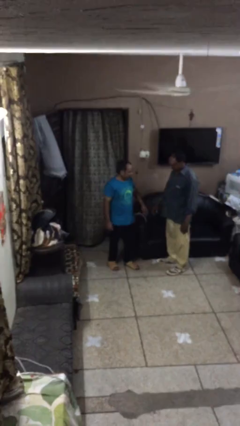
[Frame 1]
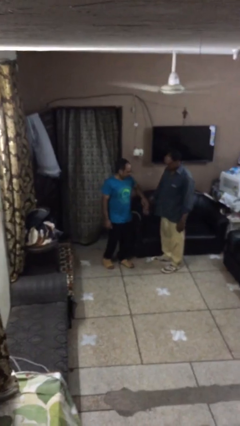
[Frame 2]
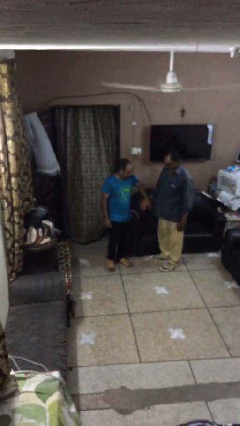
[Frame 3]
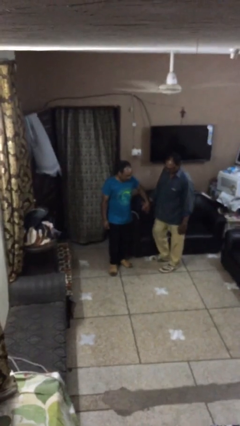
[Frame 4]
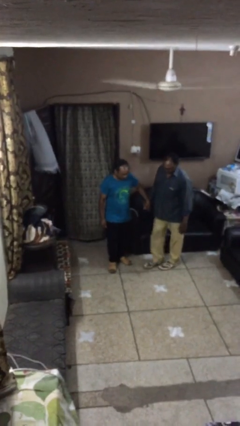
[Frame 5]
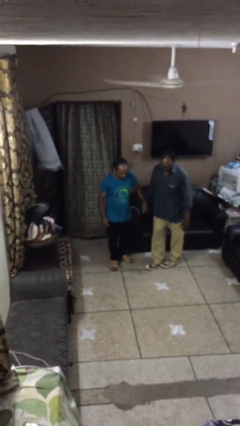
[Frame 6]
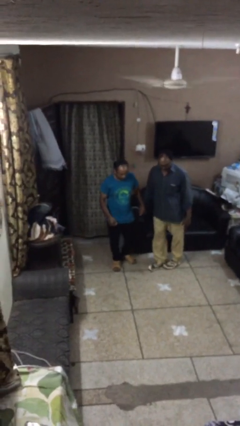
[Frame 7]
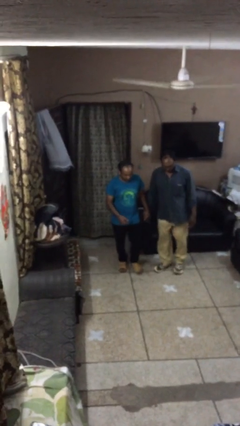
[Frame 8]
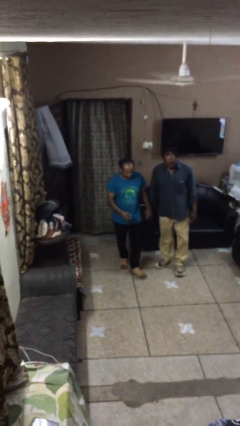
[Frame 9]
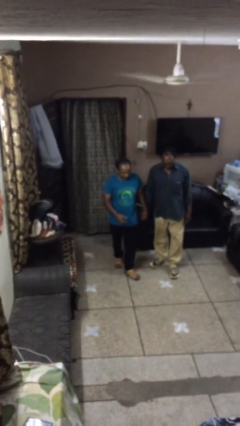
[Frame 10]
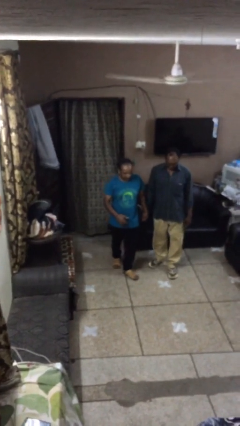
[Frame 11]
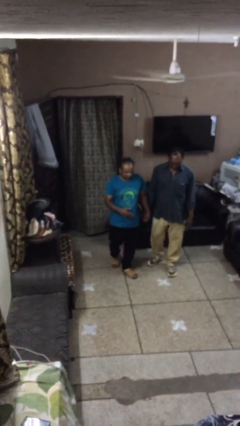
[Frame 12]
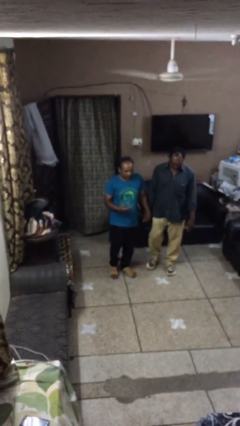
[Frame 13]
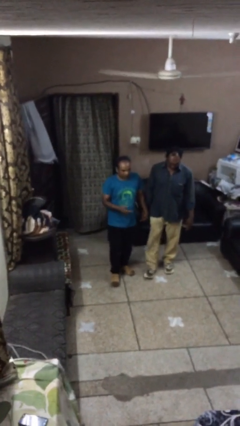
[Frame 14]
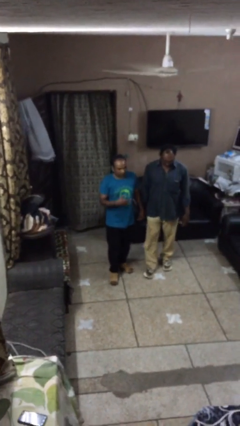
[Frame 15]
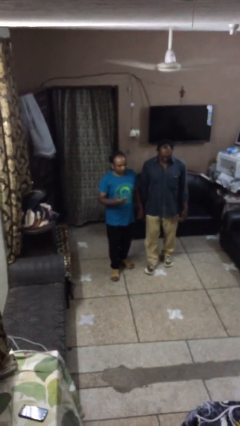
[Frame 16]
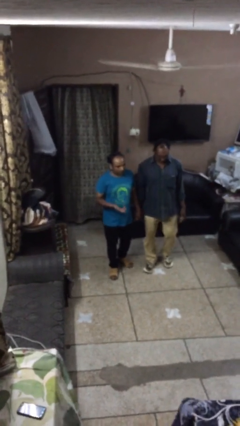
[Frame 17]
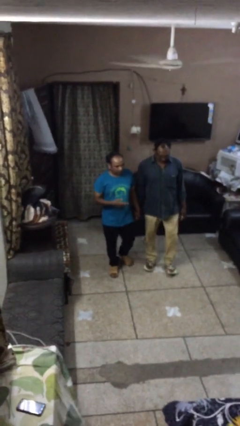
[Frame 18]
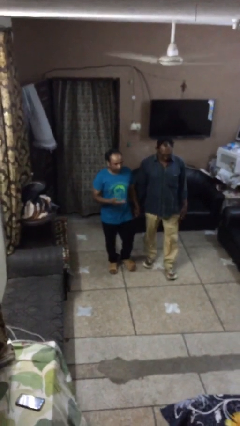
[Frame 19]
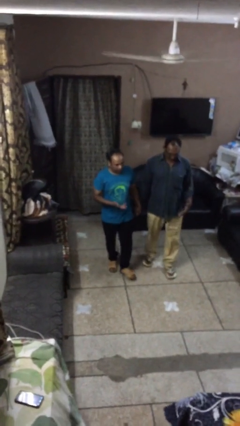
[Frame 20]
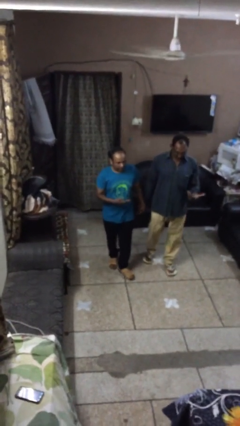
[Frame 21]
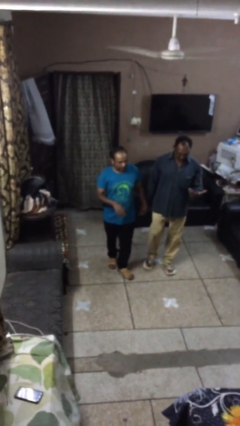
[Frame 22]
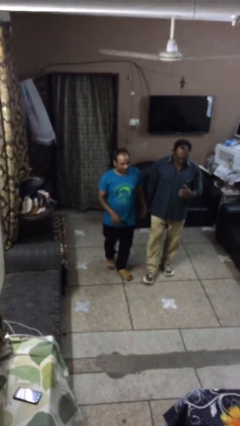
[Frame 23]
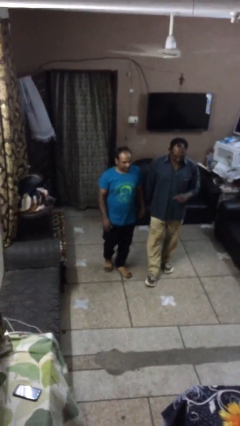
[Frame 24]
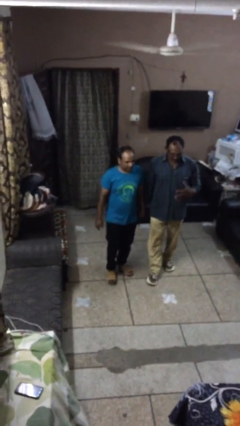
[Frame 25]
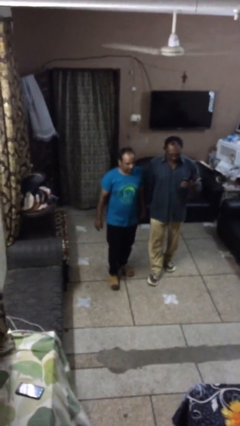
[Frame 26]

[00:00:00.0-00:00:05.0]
person holds hand

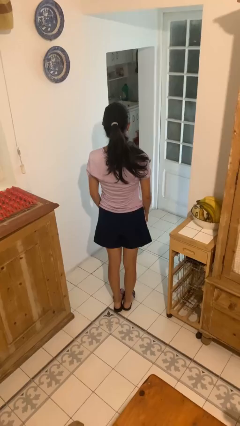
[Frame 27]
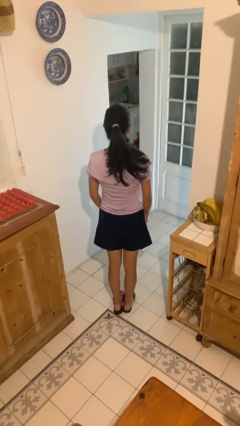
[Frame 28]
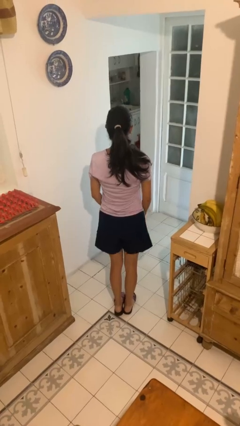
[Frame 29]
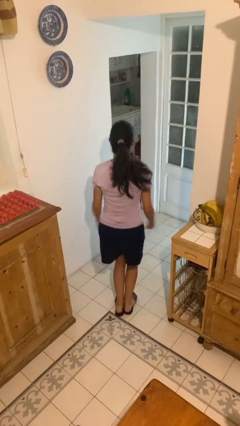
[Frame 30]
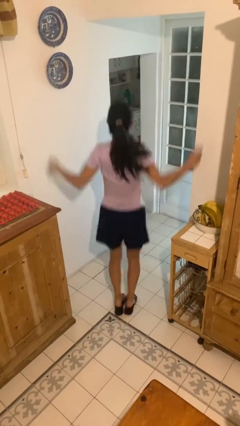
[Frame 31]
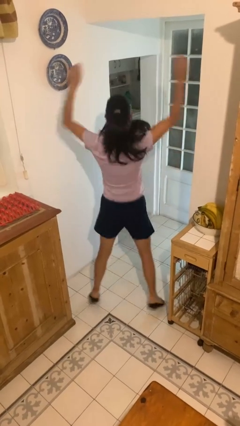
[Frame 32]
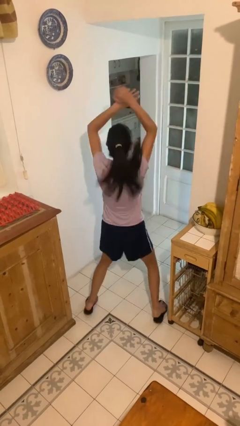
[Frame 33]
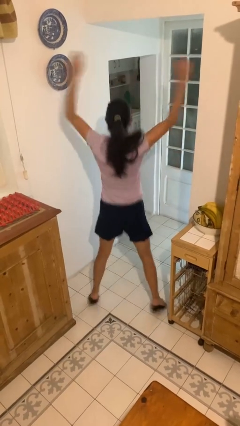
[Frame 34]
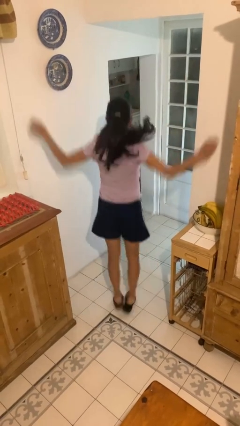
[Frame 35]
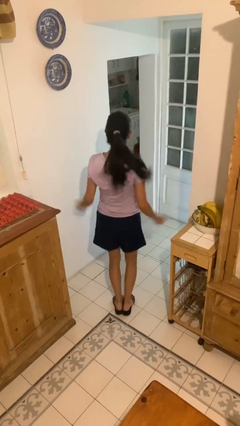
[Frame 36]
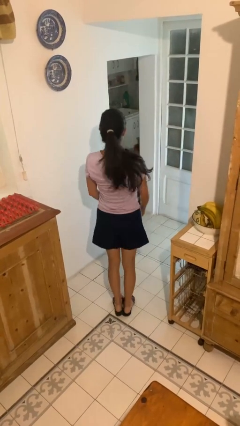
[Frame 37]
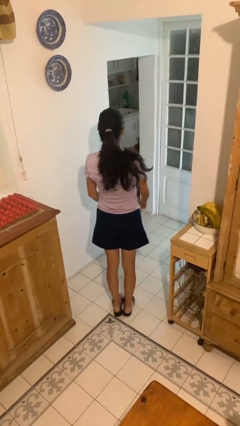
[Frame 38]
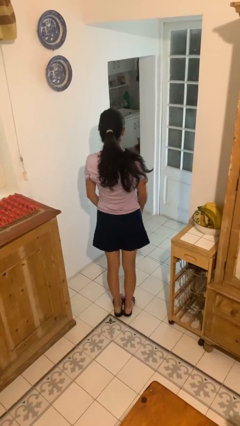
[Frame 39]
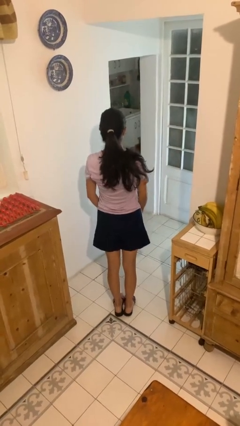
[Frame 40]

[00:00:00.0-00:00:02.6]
person exercises with jumping jacks

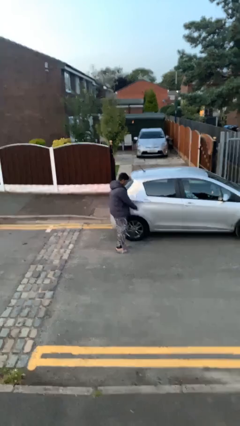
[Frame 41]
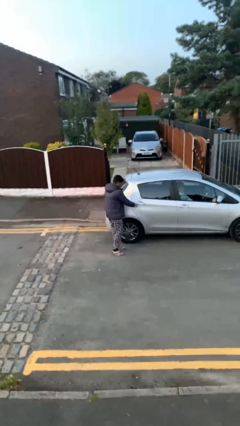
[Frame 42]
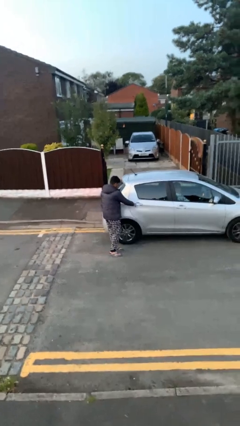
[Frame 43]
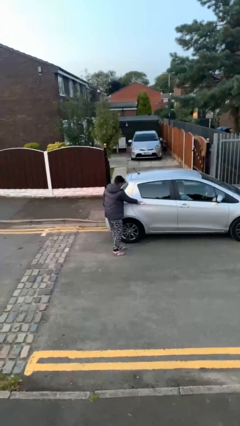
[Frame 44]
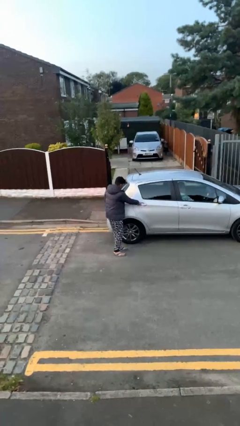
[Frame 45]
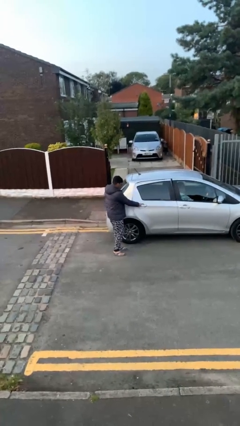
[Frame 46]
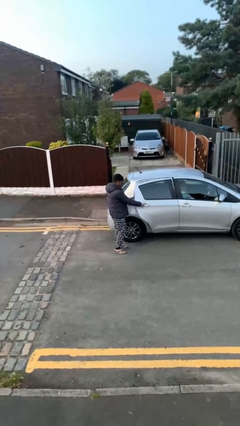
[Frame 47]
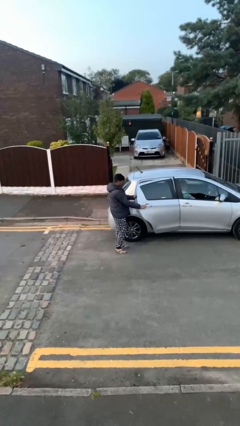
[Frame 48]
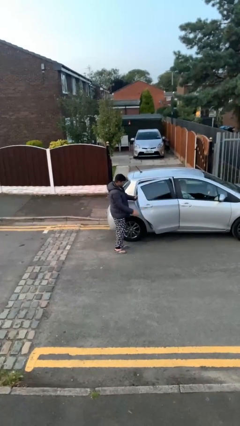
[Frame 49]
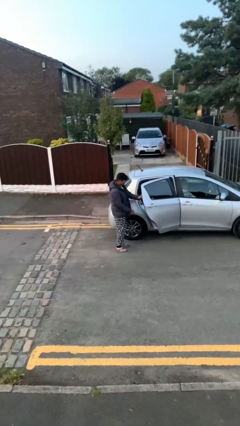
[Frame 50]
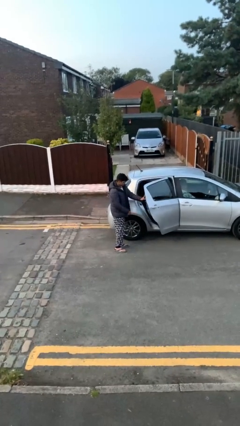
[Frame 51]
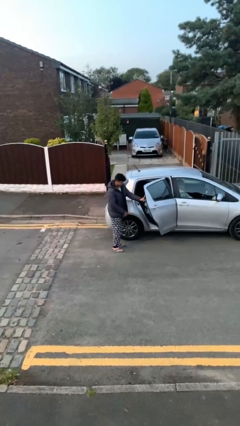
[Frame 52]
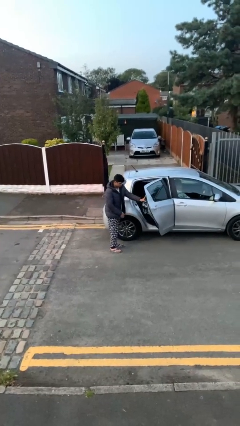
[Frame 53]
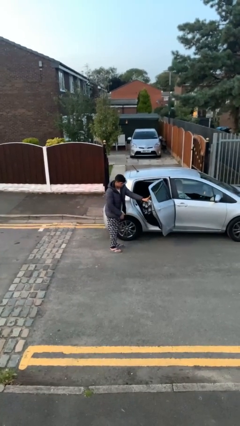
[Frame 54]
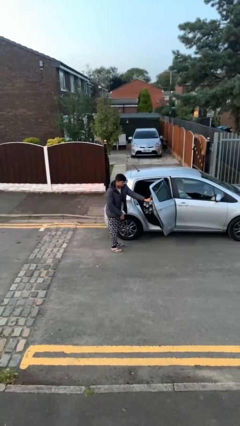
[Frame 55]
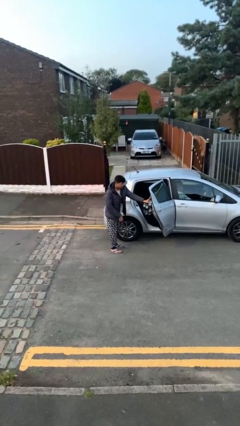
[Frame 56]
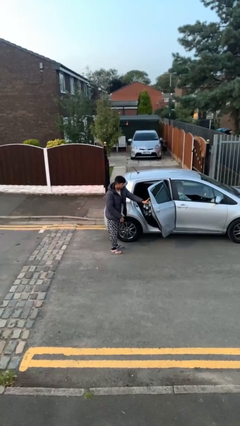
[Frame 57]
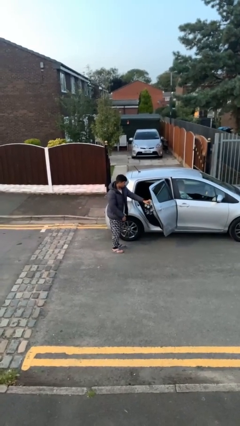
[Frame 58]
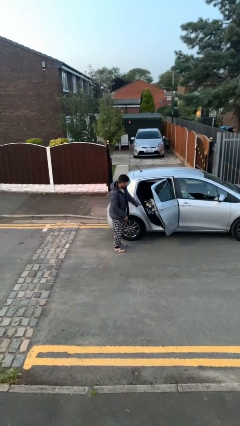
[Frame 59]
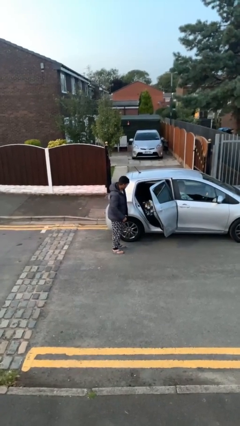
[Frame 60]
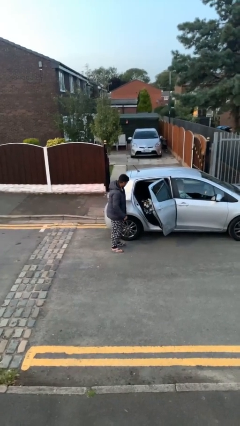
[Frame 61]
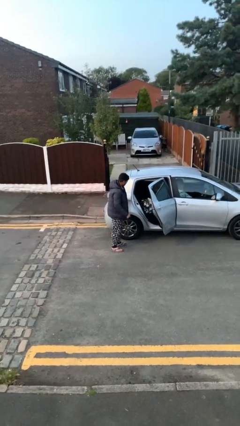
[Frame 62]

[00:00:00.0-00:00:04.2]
person opens car door

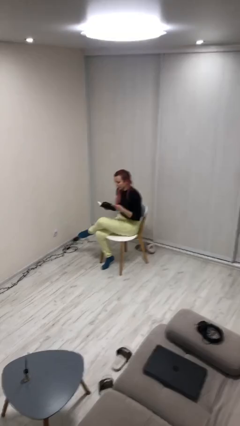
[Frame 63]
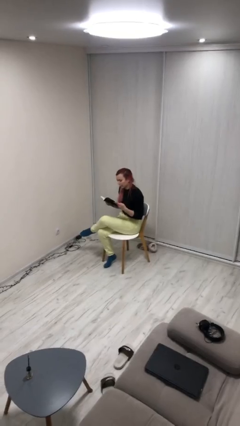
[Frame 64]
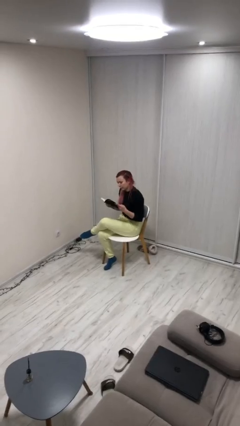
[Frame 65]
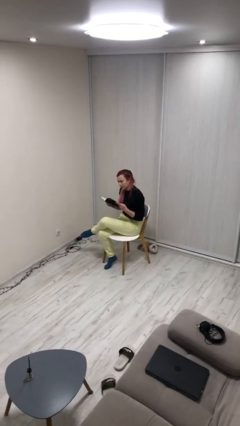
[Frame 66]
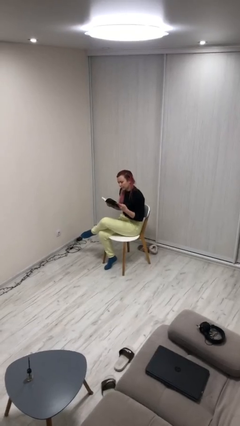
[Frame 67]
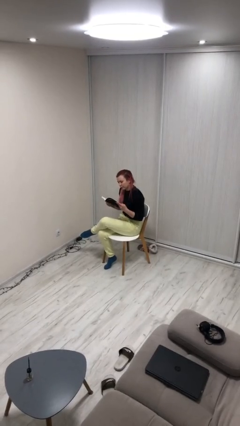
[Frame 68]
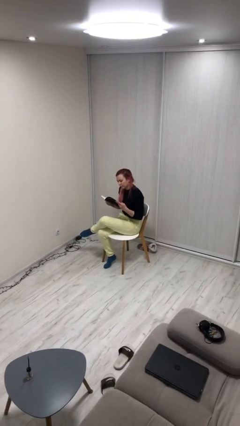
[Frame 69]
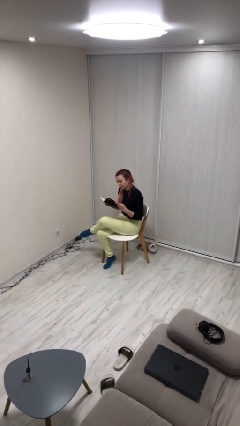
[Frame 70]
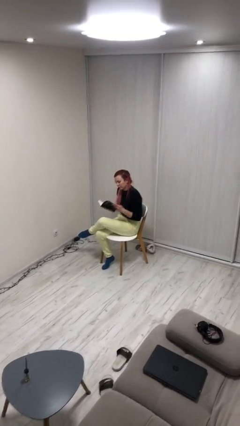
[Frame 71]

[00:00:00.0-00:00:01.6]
person reads document

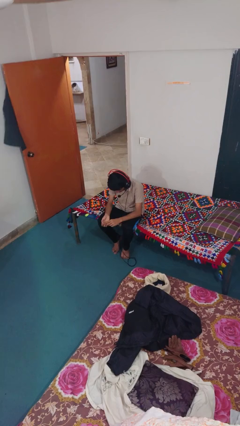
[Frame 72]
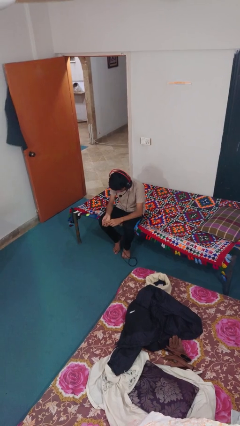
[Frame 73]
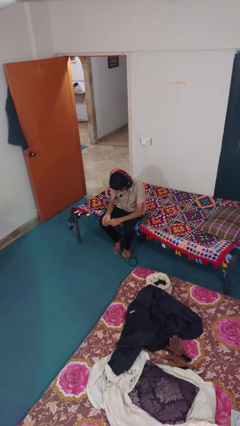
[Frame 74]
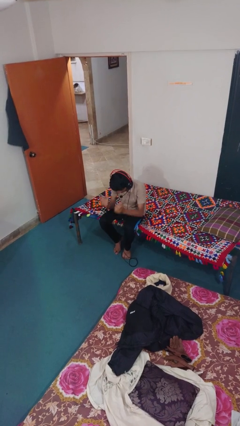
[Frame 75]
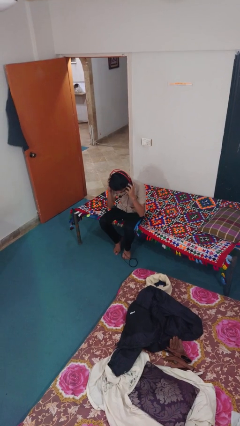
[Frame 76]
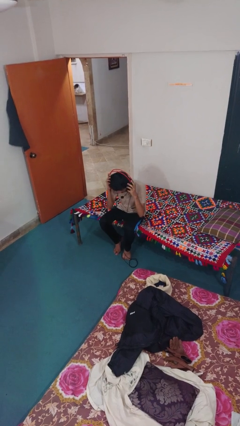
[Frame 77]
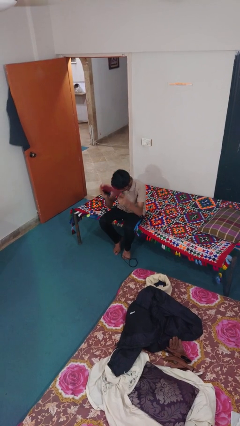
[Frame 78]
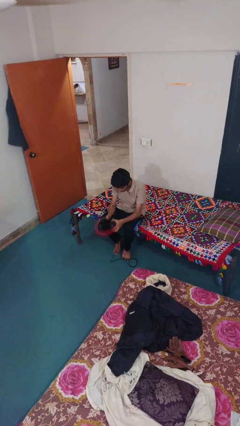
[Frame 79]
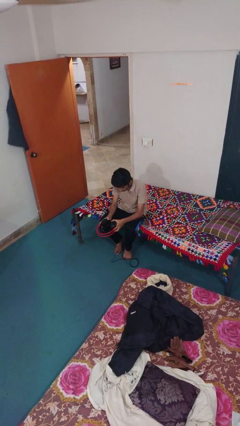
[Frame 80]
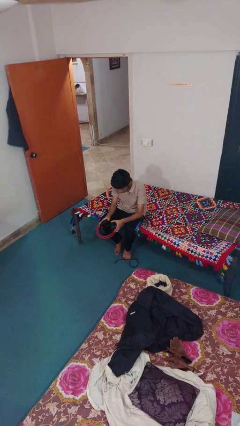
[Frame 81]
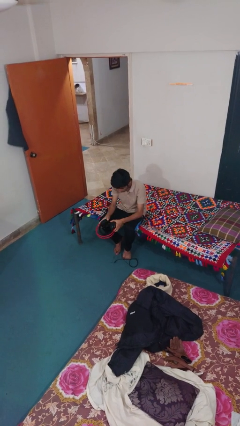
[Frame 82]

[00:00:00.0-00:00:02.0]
person takes off headphones

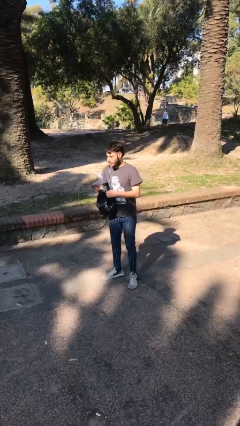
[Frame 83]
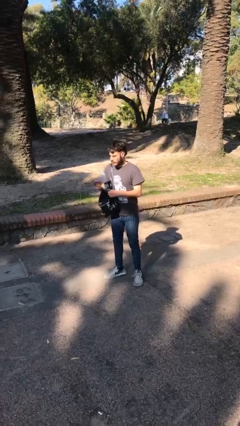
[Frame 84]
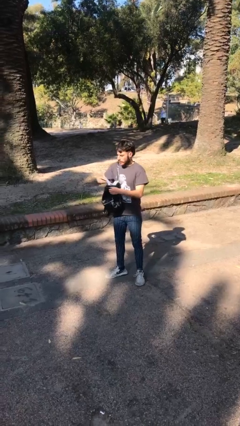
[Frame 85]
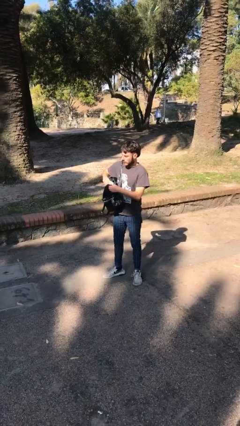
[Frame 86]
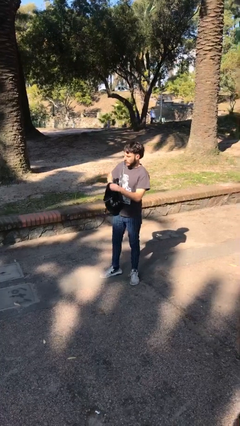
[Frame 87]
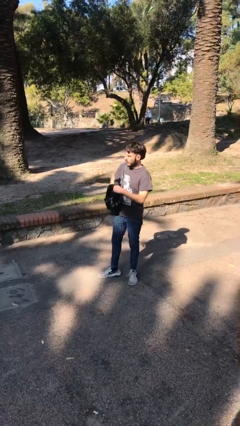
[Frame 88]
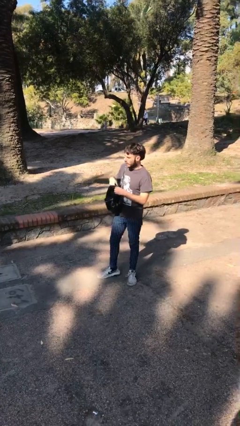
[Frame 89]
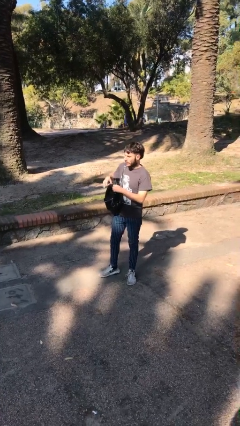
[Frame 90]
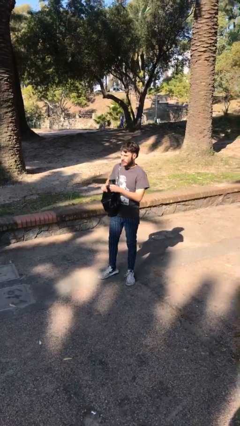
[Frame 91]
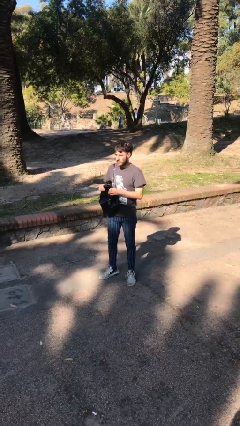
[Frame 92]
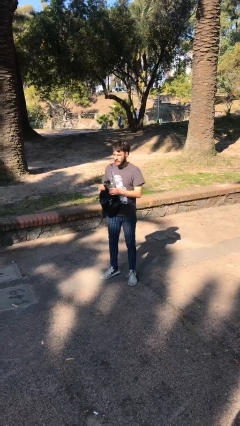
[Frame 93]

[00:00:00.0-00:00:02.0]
person puts object into backpack
